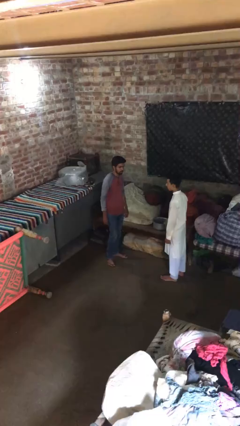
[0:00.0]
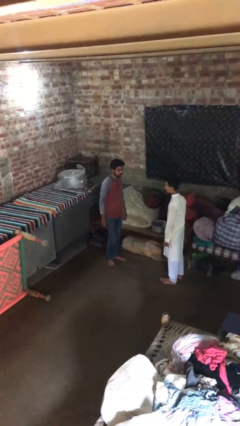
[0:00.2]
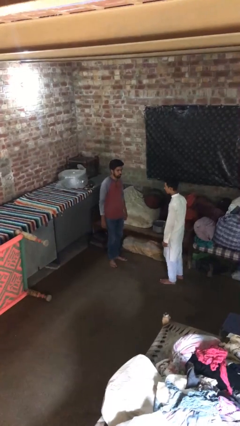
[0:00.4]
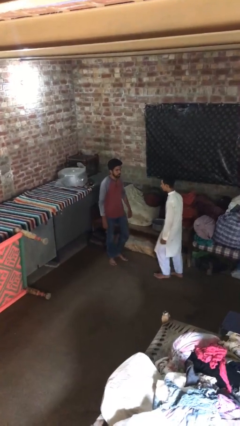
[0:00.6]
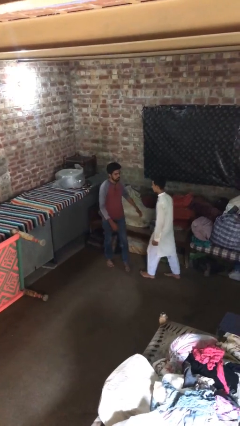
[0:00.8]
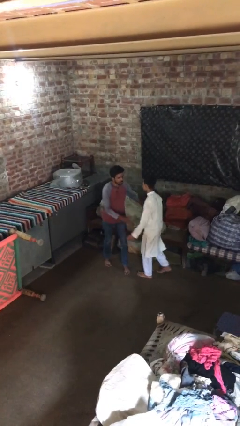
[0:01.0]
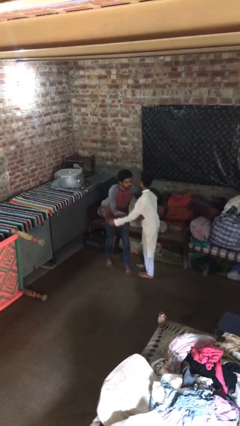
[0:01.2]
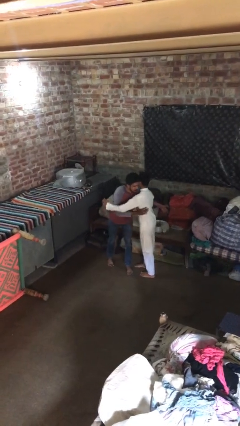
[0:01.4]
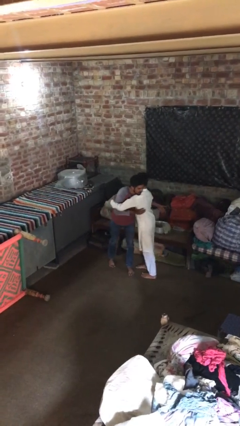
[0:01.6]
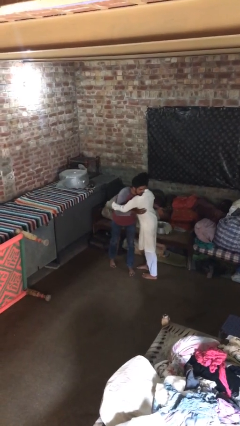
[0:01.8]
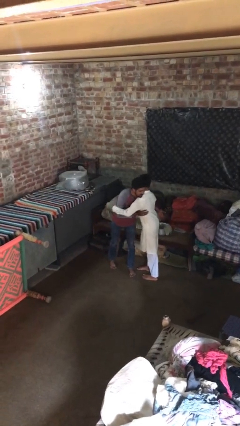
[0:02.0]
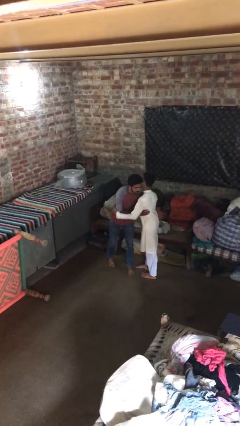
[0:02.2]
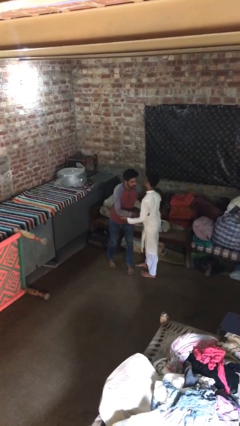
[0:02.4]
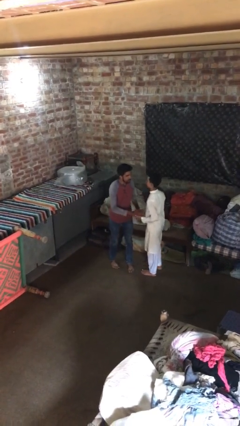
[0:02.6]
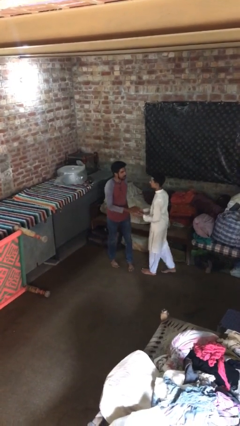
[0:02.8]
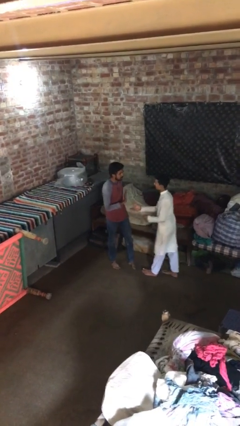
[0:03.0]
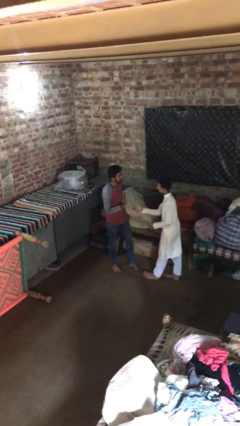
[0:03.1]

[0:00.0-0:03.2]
person embraces person

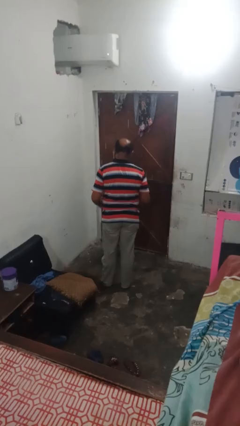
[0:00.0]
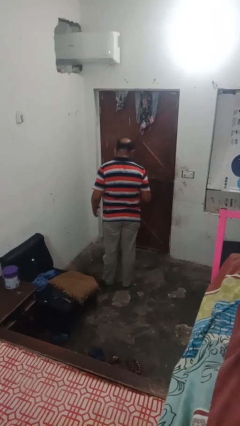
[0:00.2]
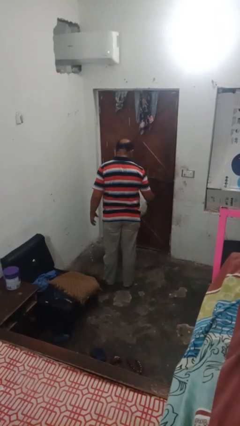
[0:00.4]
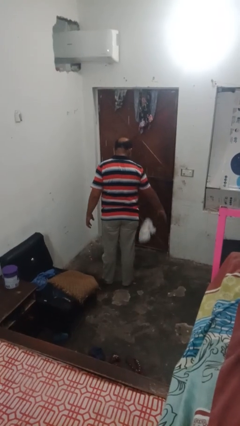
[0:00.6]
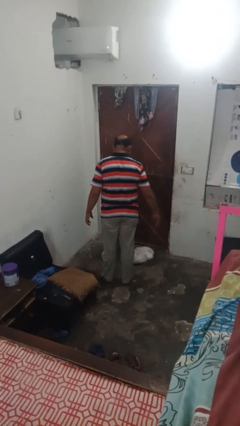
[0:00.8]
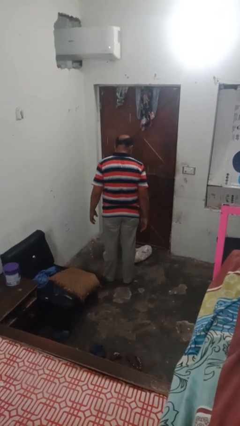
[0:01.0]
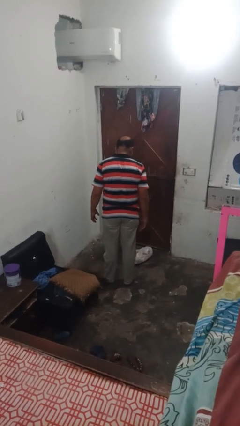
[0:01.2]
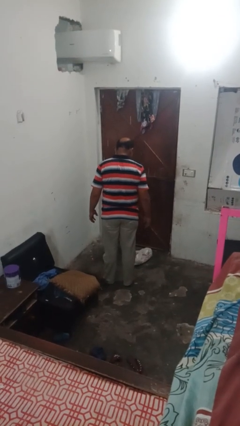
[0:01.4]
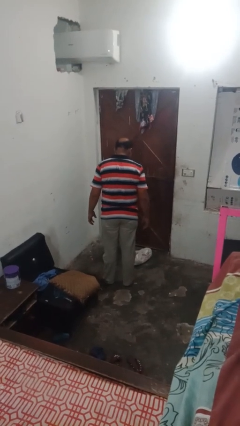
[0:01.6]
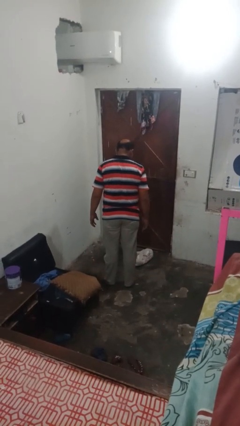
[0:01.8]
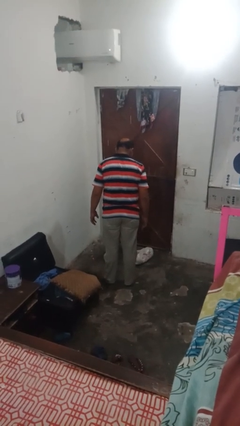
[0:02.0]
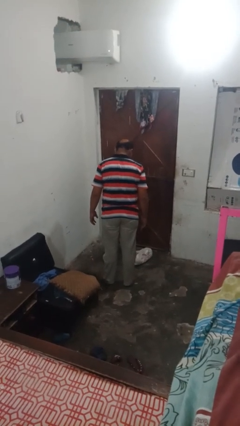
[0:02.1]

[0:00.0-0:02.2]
person throws object to ground

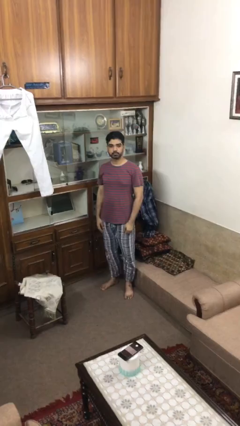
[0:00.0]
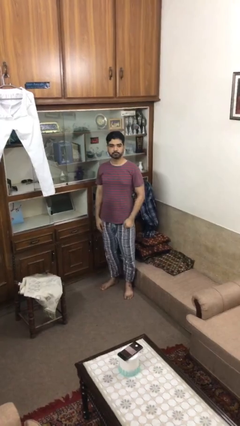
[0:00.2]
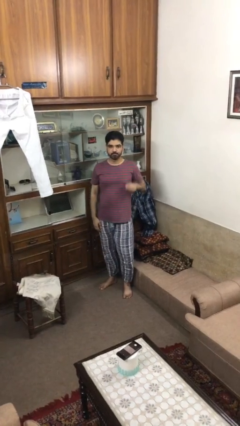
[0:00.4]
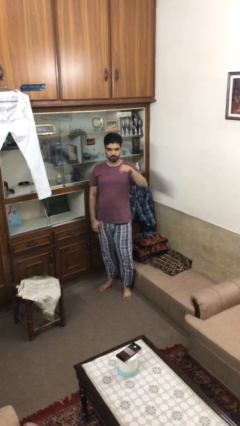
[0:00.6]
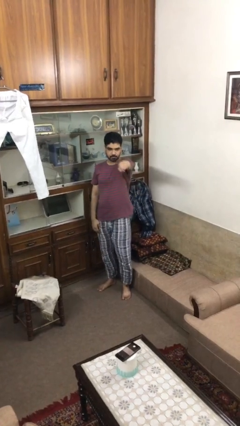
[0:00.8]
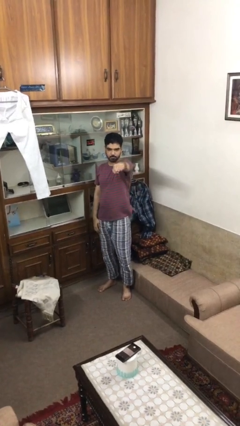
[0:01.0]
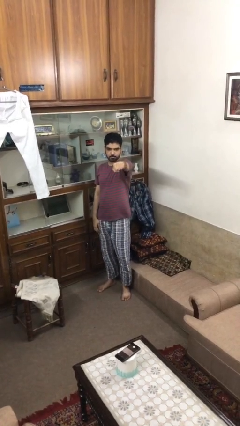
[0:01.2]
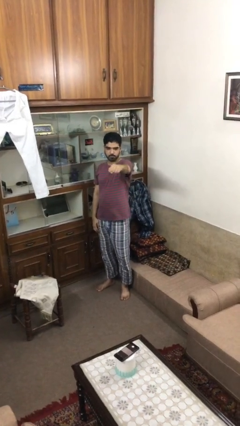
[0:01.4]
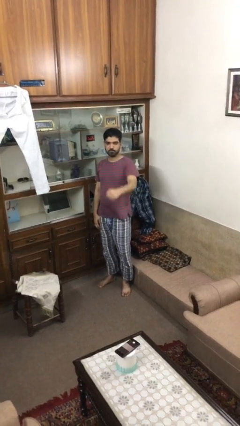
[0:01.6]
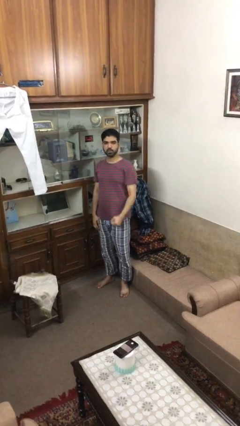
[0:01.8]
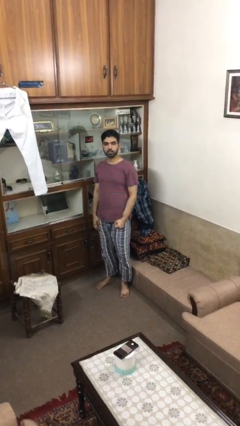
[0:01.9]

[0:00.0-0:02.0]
person punches

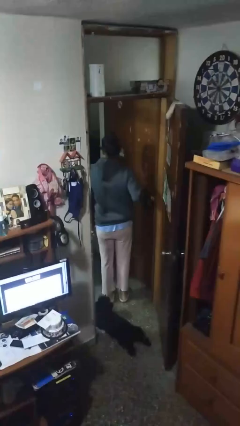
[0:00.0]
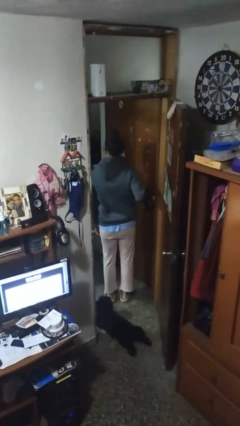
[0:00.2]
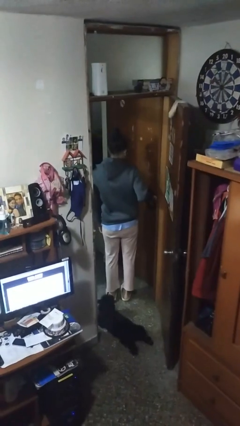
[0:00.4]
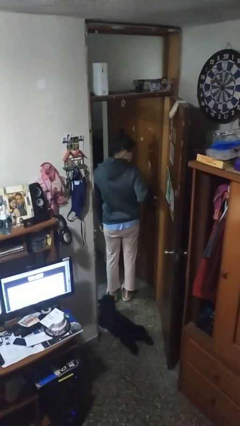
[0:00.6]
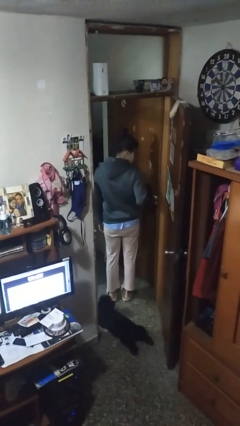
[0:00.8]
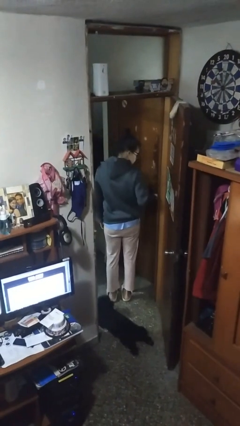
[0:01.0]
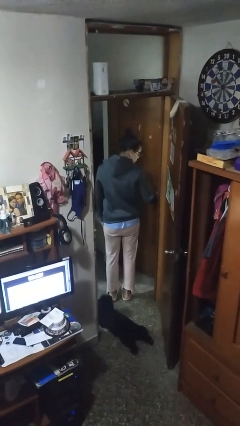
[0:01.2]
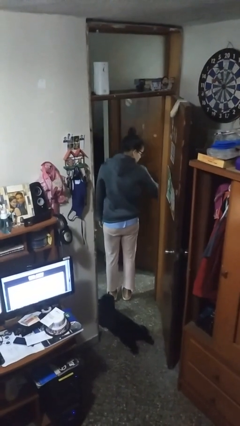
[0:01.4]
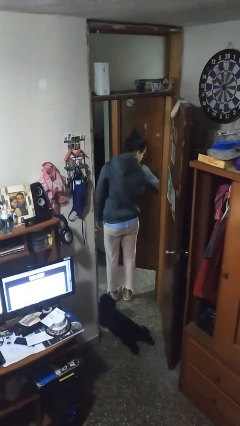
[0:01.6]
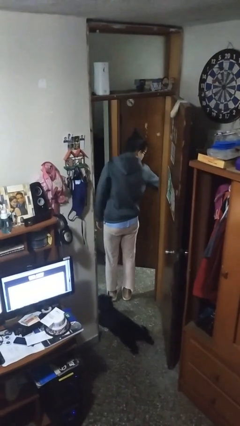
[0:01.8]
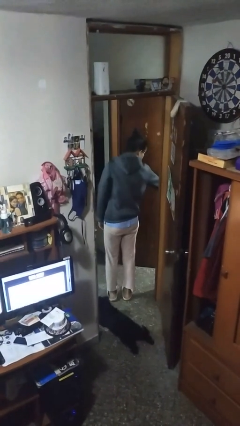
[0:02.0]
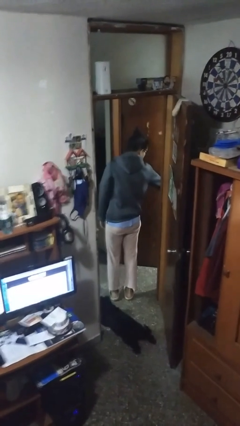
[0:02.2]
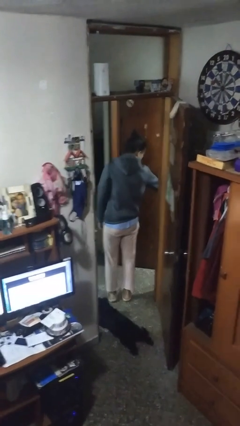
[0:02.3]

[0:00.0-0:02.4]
person opens facility door

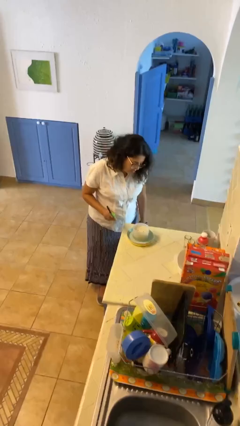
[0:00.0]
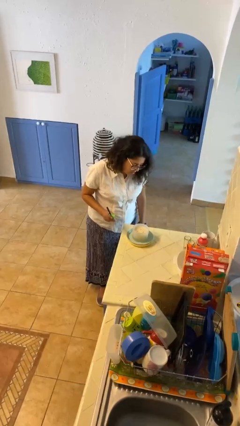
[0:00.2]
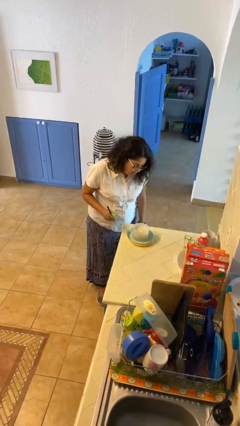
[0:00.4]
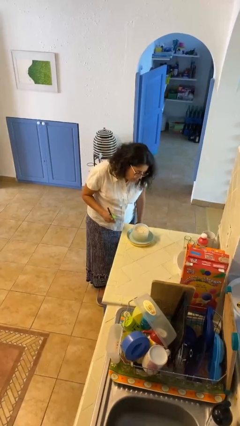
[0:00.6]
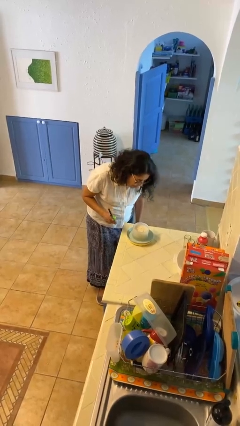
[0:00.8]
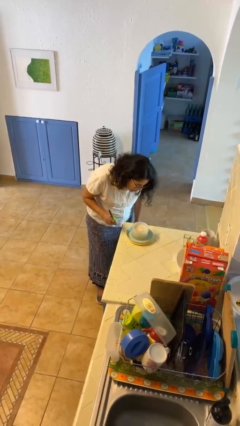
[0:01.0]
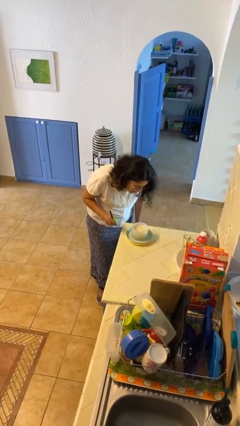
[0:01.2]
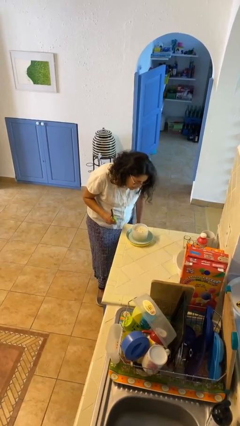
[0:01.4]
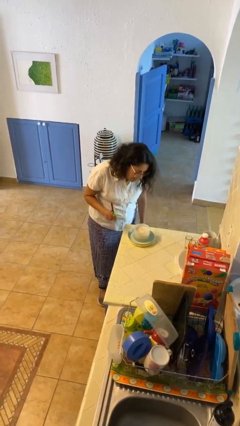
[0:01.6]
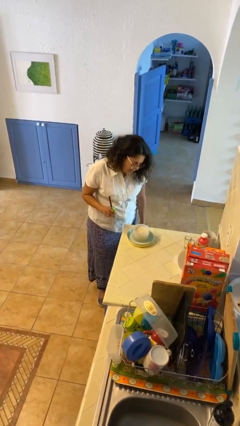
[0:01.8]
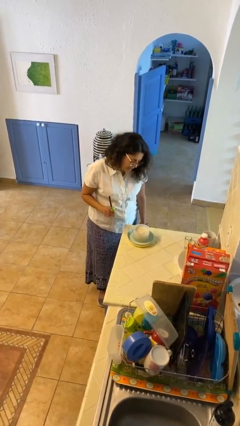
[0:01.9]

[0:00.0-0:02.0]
person extinguishes candle

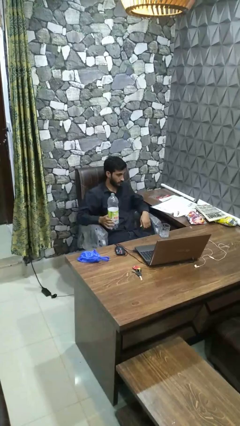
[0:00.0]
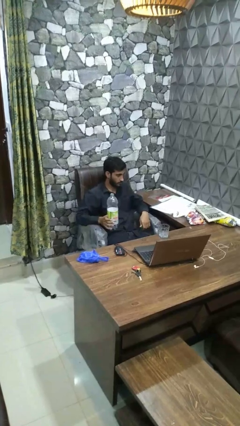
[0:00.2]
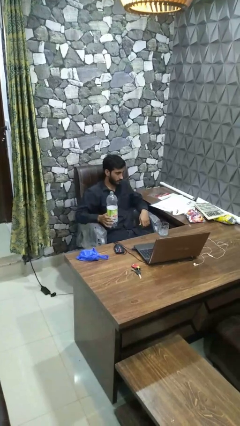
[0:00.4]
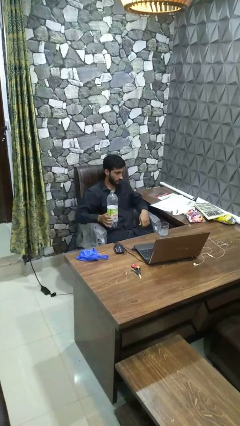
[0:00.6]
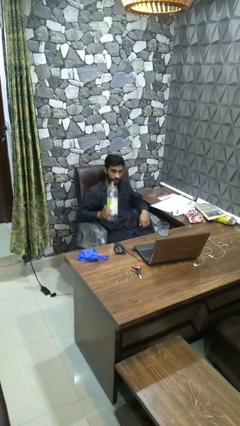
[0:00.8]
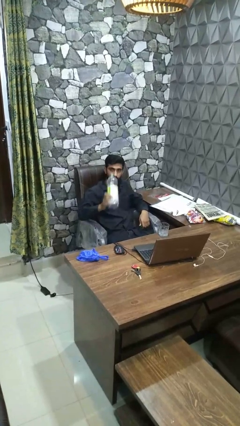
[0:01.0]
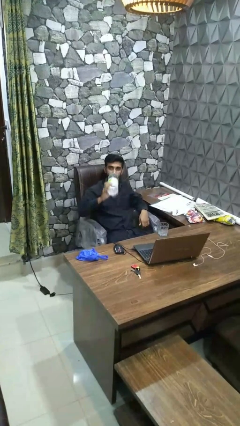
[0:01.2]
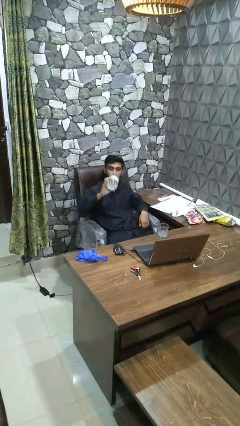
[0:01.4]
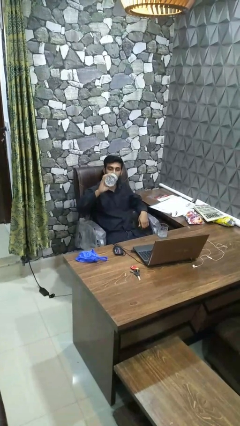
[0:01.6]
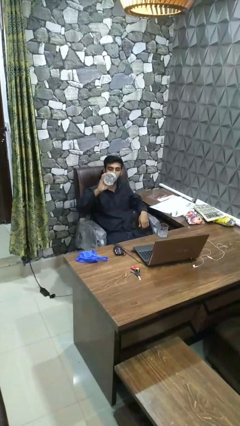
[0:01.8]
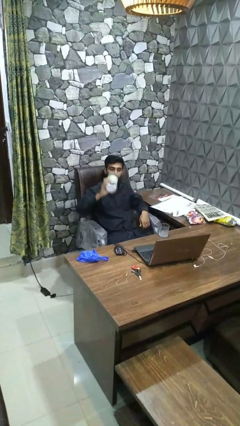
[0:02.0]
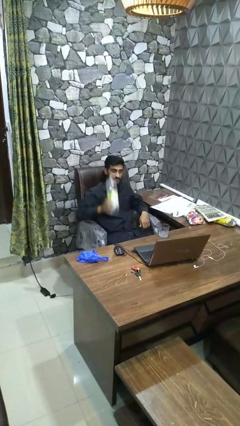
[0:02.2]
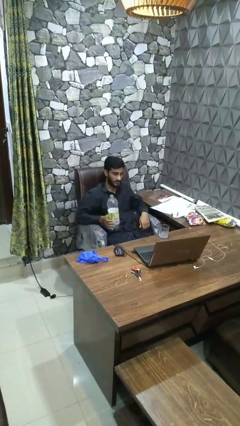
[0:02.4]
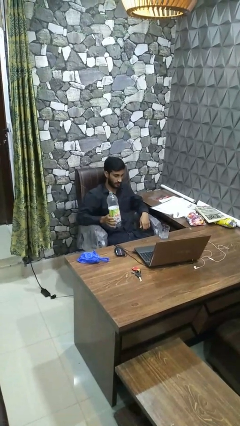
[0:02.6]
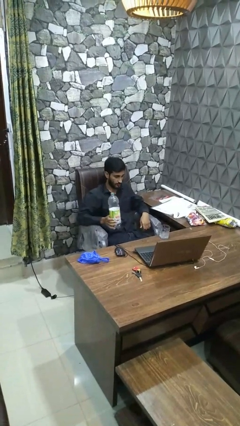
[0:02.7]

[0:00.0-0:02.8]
person drinks from bottle

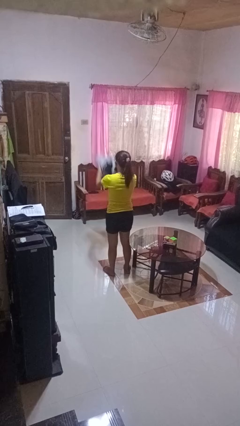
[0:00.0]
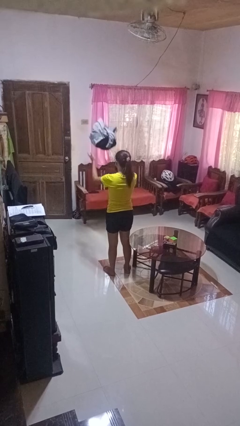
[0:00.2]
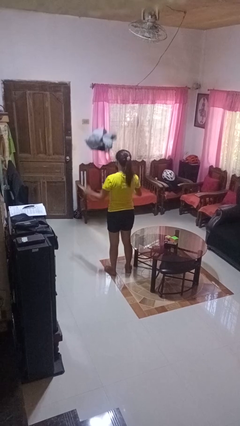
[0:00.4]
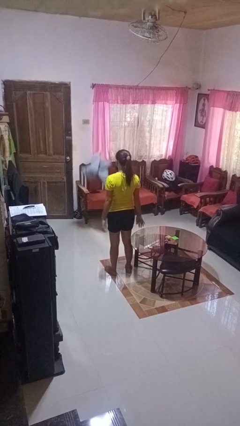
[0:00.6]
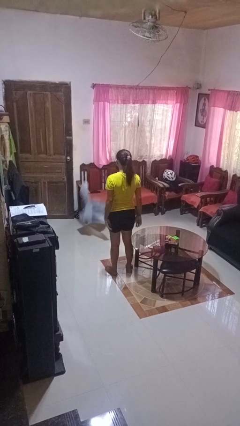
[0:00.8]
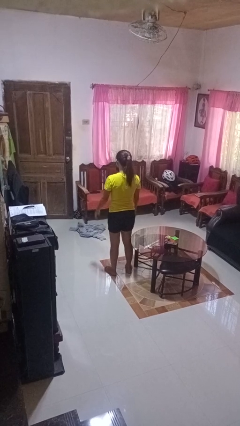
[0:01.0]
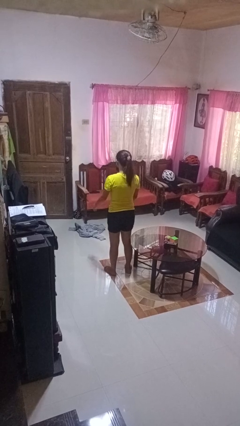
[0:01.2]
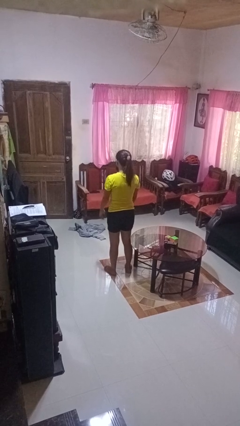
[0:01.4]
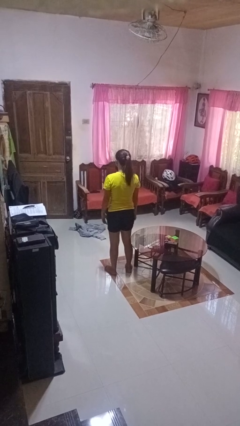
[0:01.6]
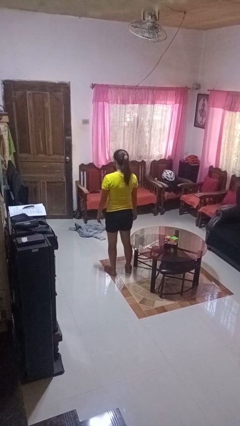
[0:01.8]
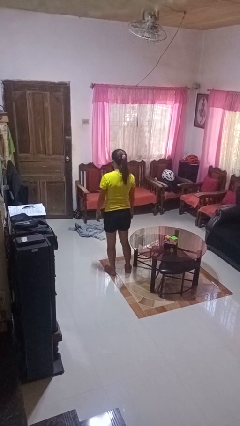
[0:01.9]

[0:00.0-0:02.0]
person throws object into air

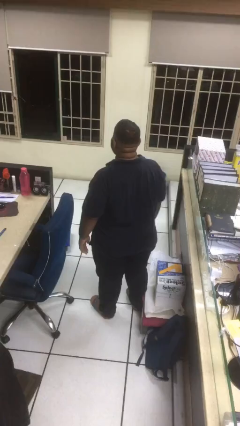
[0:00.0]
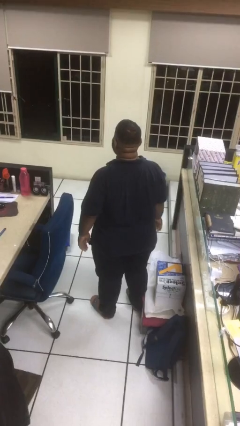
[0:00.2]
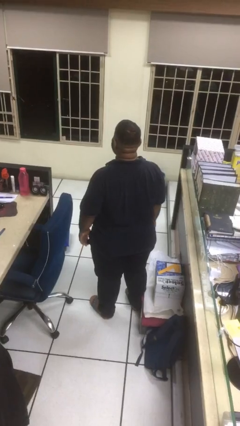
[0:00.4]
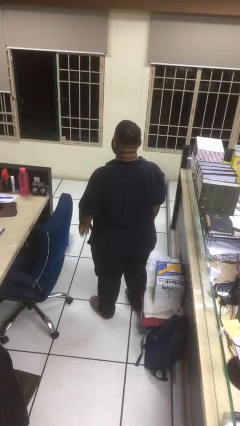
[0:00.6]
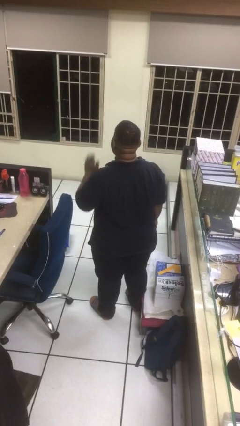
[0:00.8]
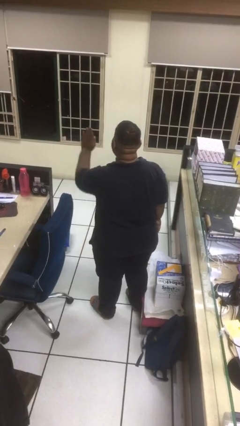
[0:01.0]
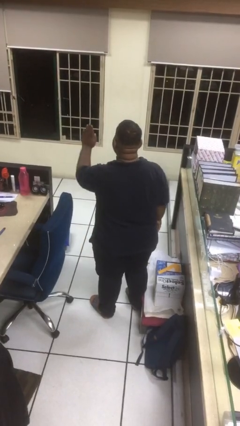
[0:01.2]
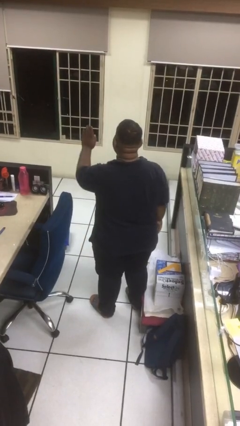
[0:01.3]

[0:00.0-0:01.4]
person gestures stop